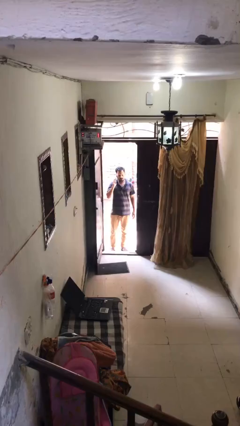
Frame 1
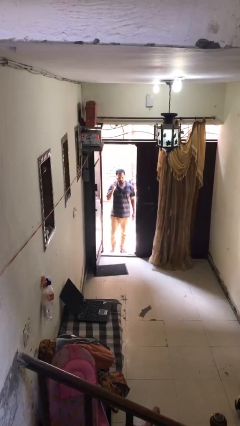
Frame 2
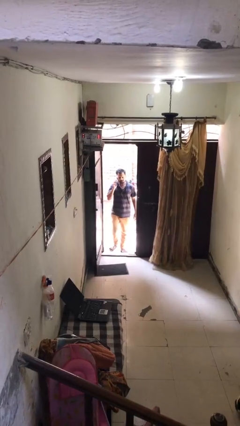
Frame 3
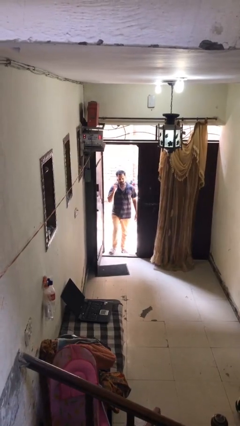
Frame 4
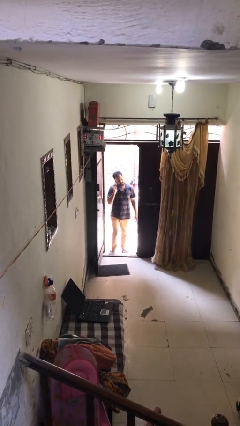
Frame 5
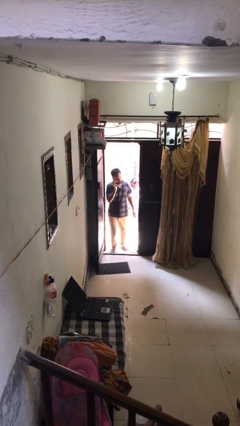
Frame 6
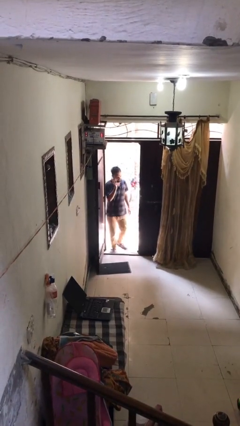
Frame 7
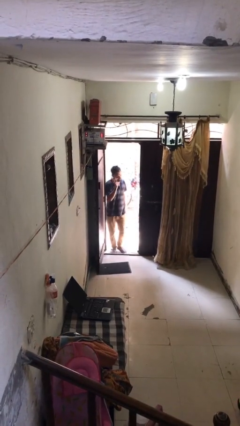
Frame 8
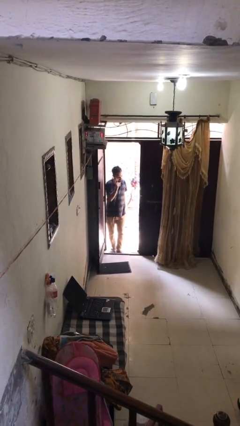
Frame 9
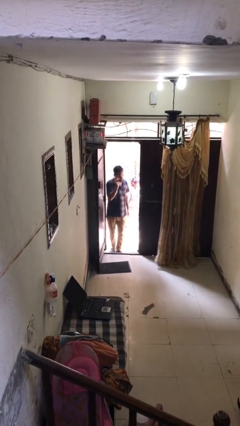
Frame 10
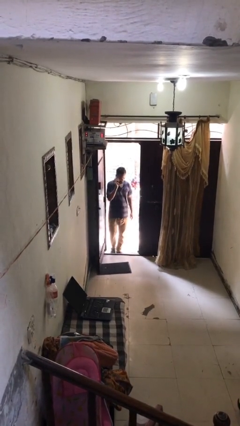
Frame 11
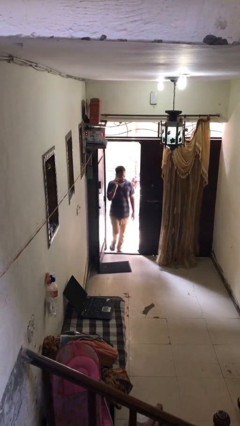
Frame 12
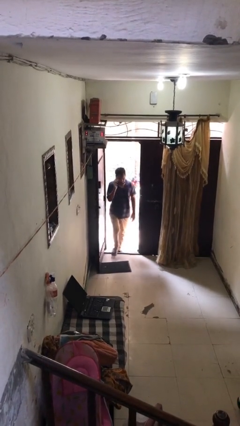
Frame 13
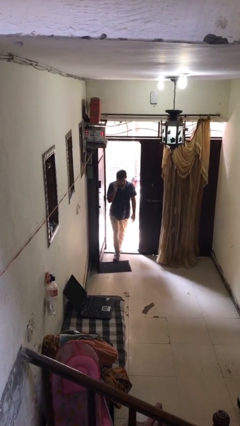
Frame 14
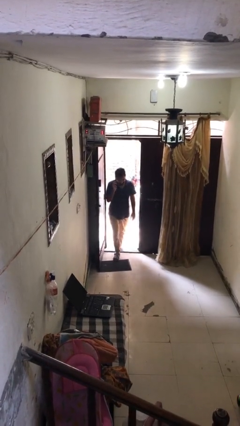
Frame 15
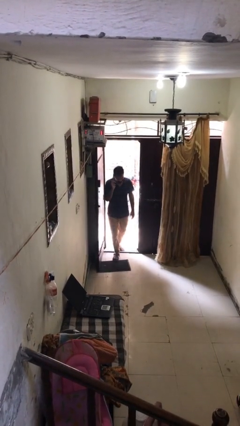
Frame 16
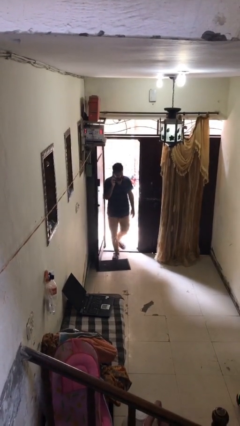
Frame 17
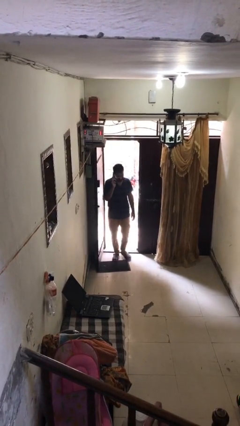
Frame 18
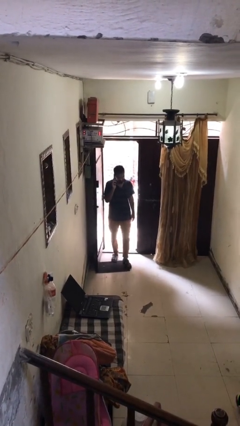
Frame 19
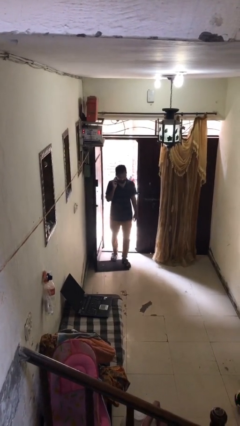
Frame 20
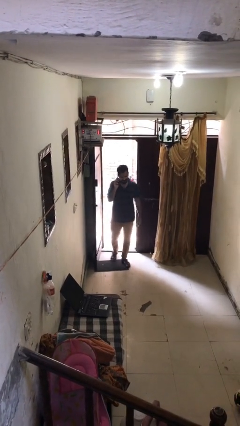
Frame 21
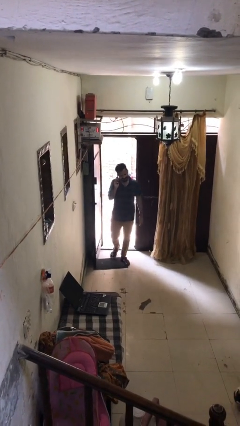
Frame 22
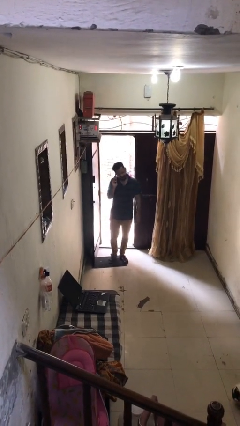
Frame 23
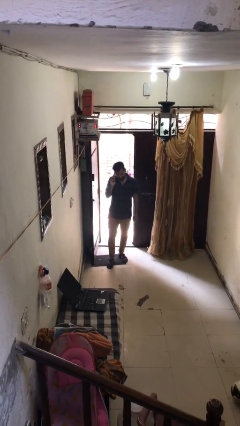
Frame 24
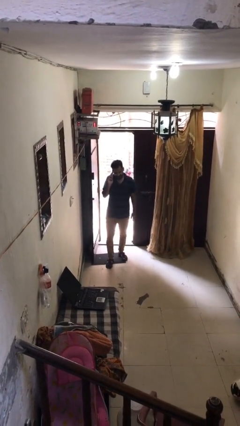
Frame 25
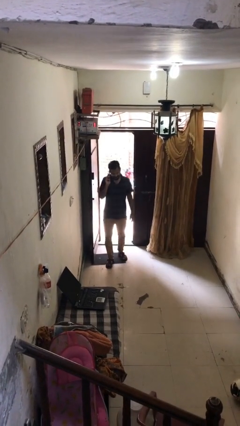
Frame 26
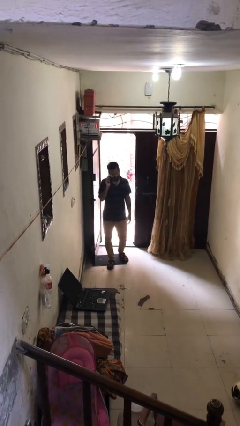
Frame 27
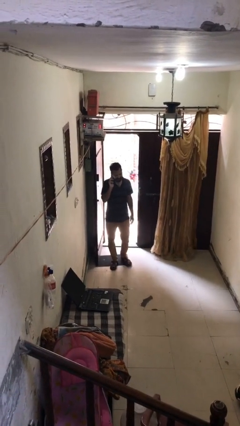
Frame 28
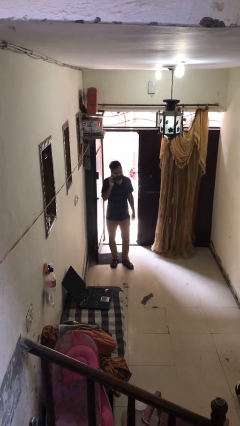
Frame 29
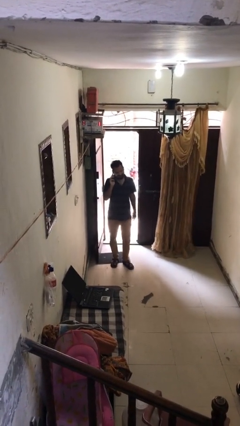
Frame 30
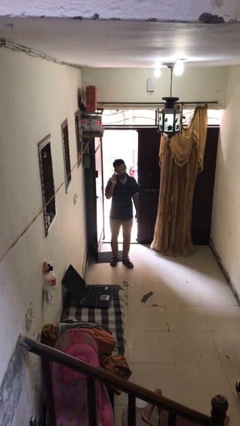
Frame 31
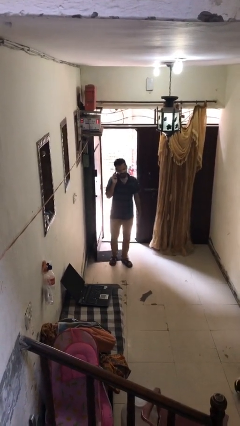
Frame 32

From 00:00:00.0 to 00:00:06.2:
person enters scene through structure

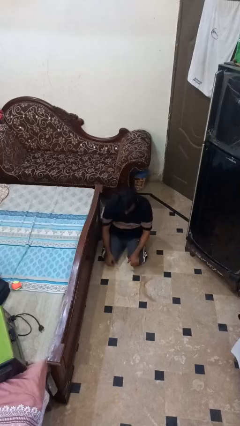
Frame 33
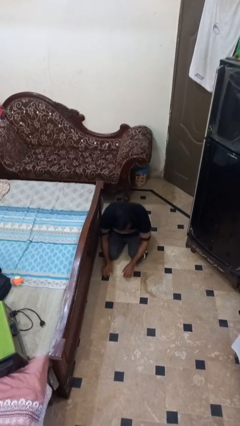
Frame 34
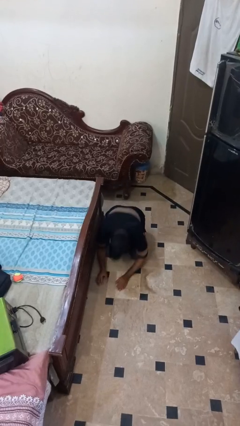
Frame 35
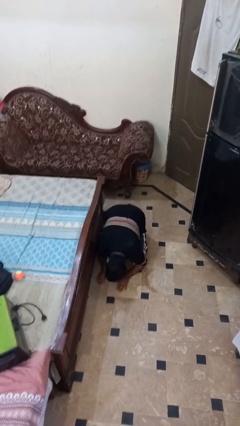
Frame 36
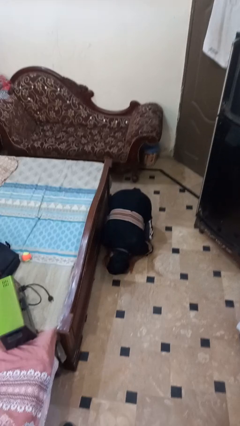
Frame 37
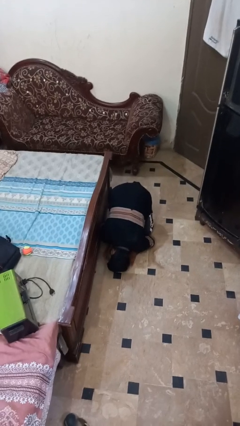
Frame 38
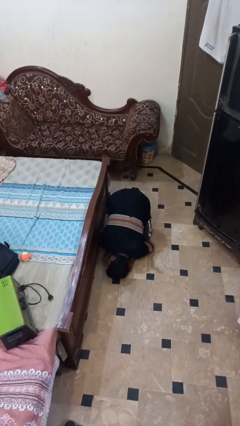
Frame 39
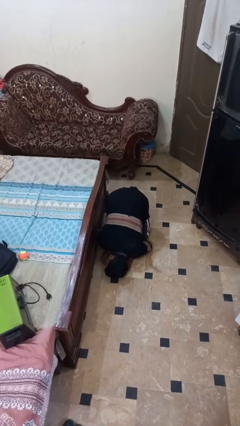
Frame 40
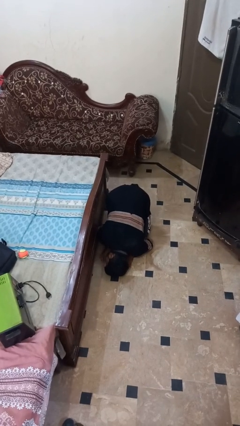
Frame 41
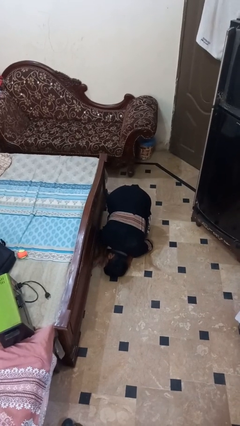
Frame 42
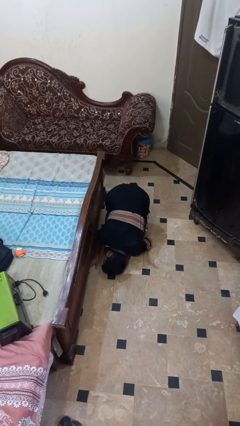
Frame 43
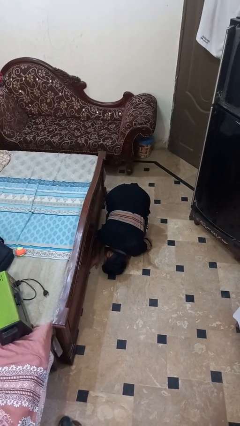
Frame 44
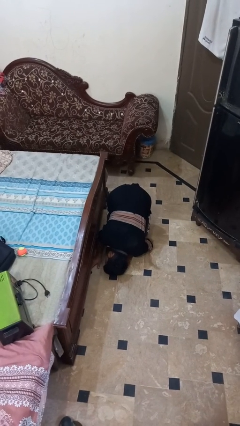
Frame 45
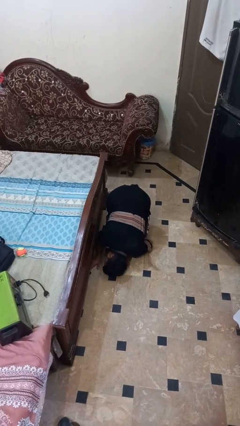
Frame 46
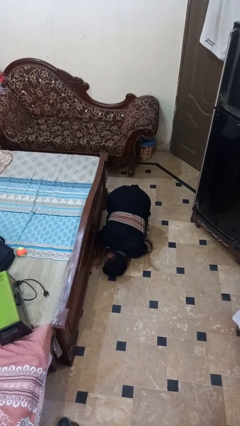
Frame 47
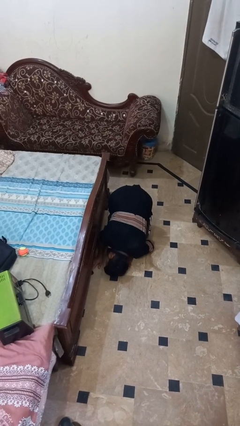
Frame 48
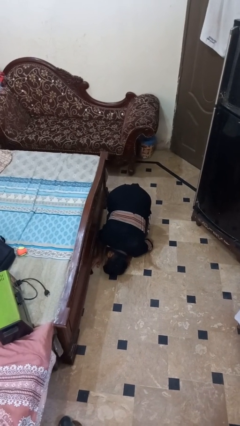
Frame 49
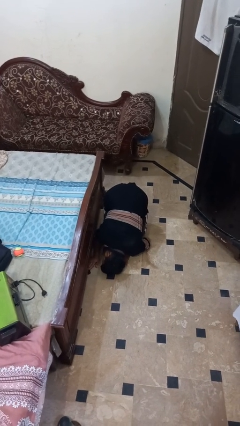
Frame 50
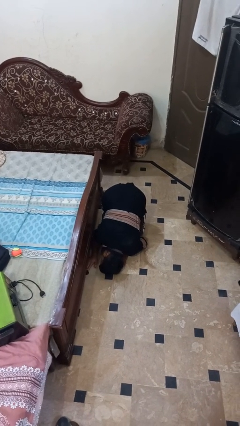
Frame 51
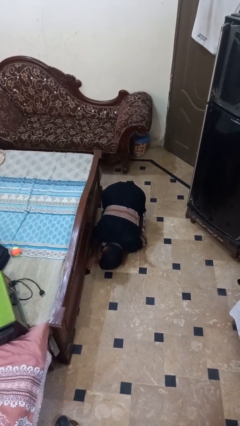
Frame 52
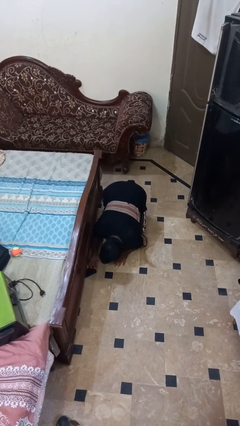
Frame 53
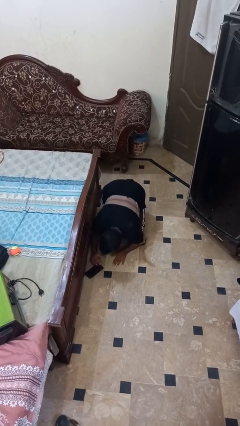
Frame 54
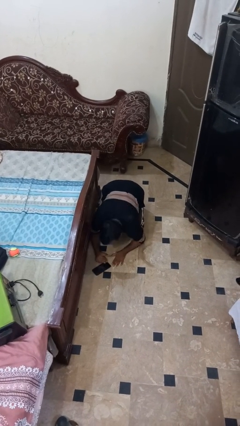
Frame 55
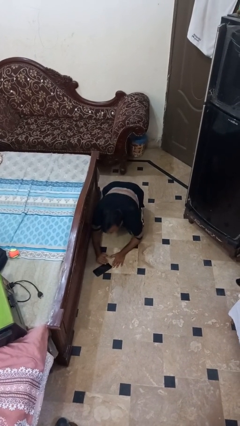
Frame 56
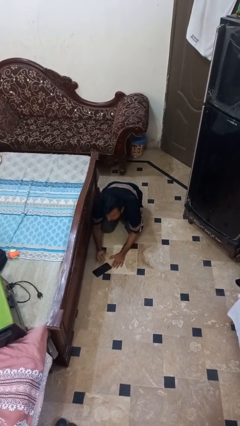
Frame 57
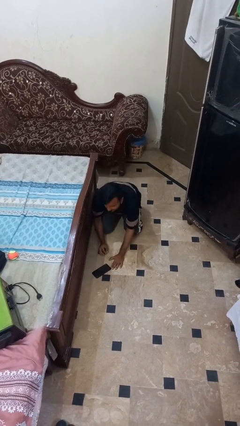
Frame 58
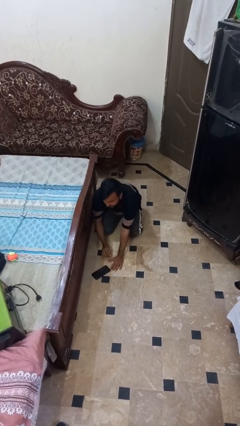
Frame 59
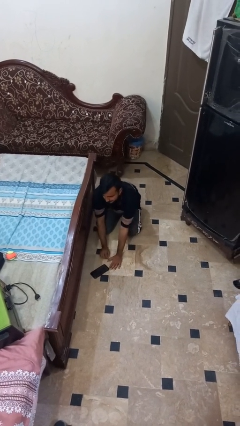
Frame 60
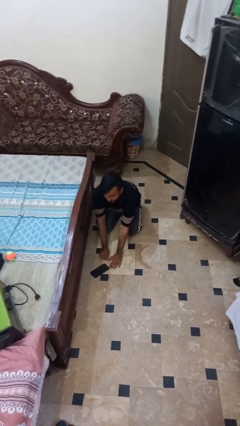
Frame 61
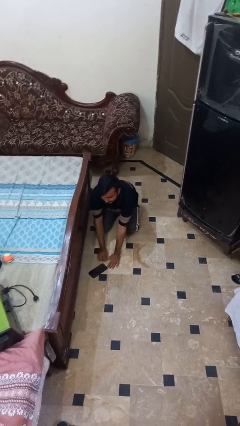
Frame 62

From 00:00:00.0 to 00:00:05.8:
person searches under bed

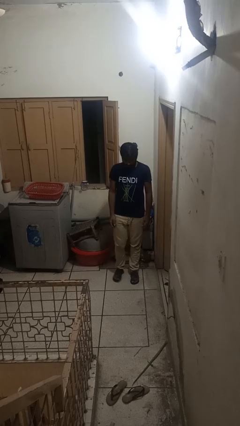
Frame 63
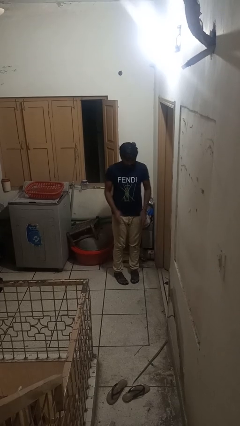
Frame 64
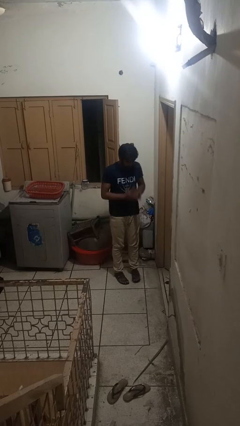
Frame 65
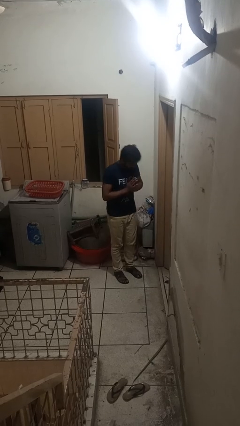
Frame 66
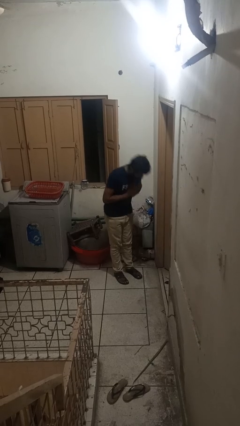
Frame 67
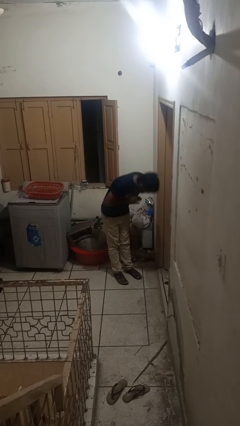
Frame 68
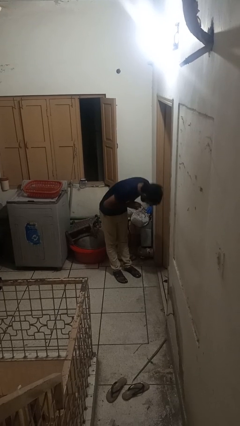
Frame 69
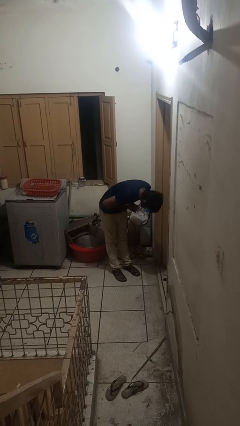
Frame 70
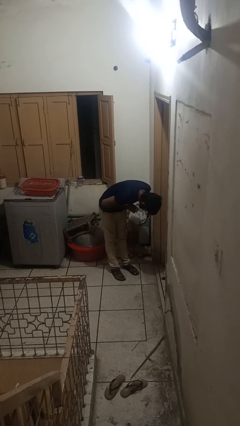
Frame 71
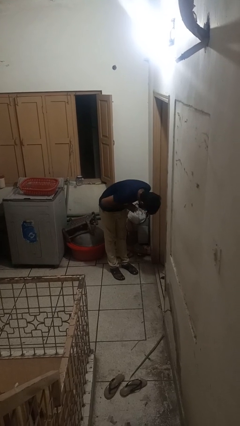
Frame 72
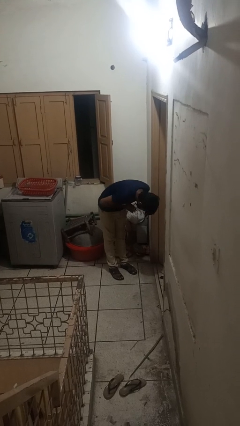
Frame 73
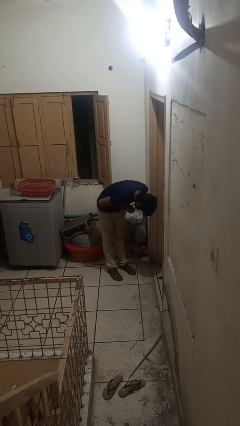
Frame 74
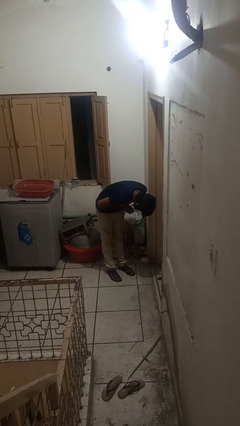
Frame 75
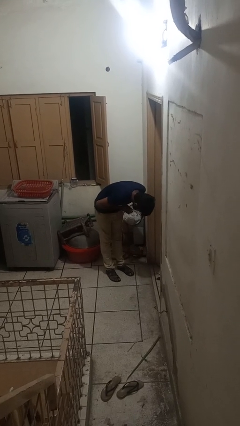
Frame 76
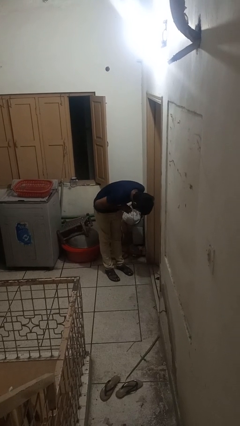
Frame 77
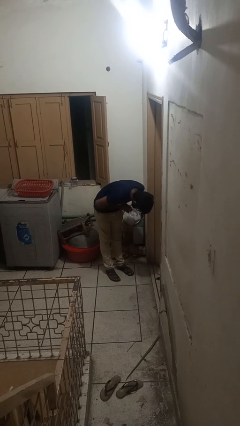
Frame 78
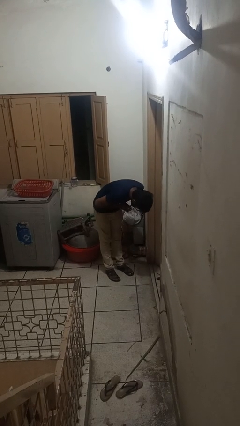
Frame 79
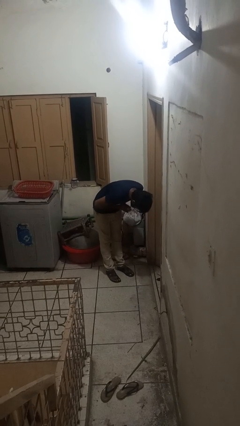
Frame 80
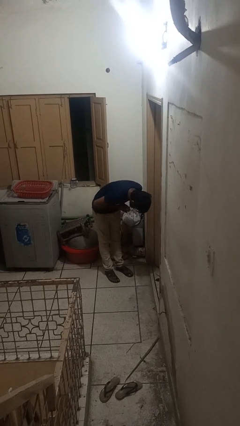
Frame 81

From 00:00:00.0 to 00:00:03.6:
person bows

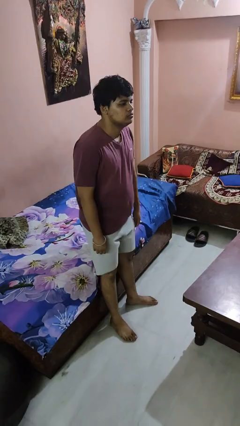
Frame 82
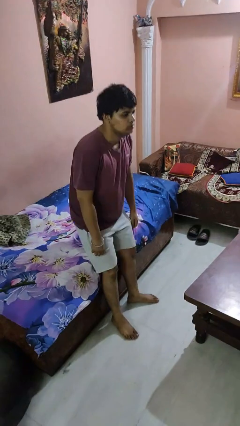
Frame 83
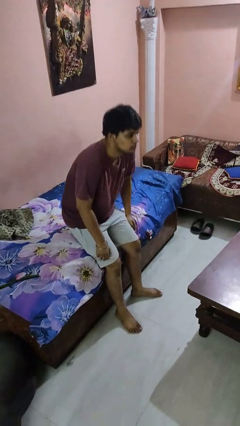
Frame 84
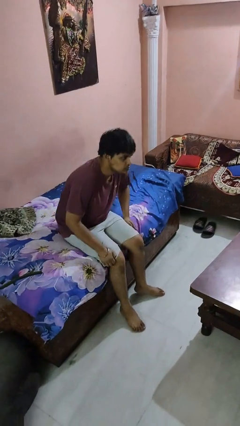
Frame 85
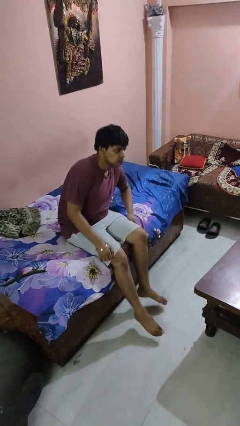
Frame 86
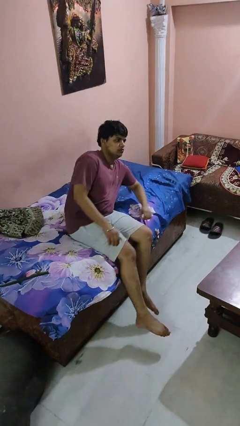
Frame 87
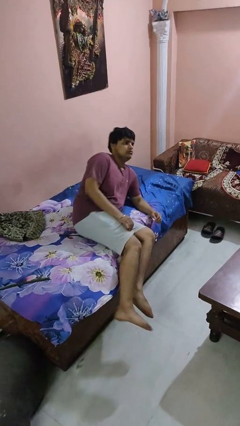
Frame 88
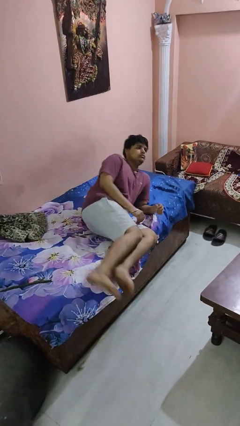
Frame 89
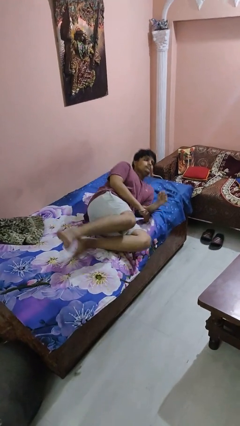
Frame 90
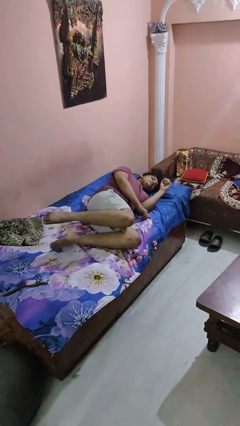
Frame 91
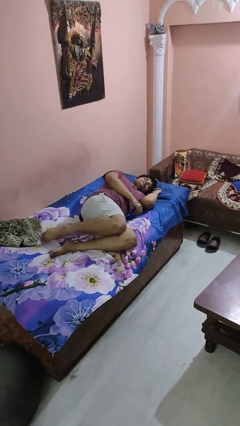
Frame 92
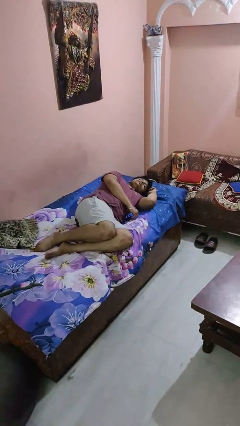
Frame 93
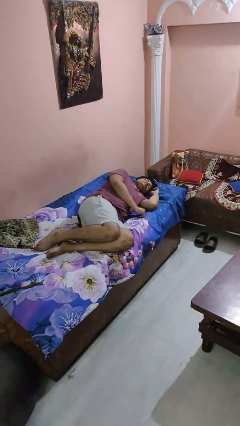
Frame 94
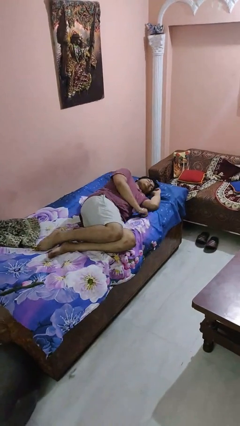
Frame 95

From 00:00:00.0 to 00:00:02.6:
person lies down on bed
